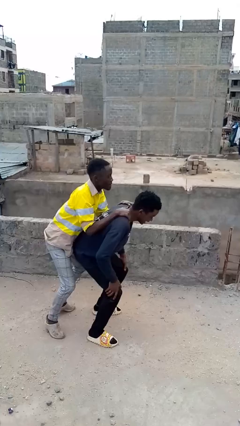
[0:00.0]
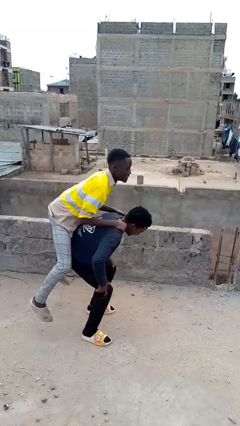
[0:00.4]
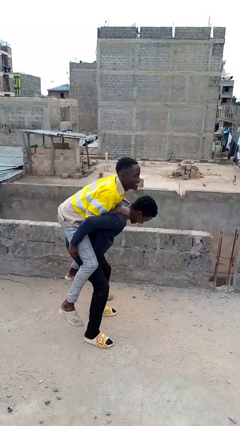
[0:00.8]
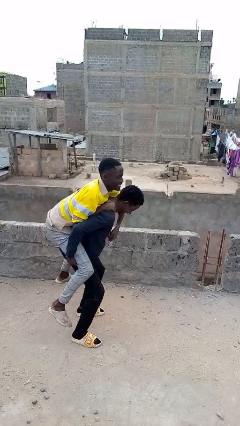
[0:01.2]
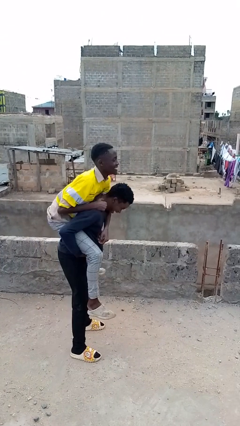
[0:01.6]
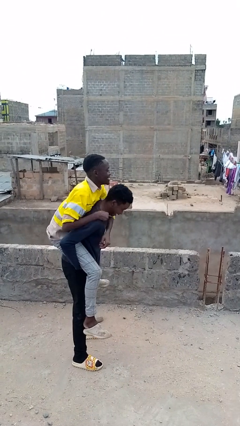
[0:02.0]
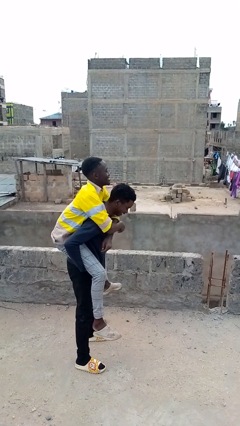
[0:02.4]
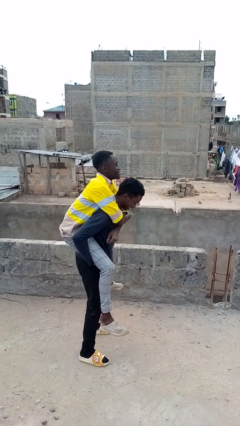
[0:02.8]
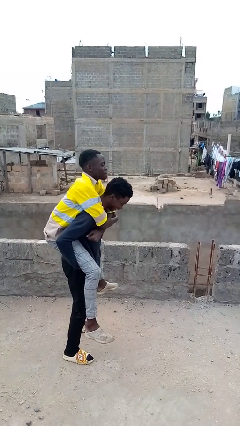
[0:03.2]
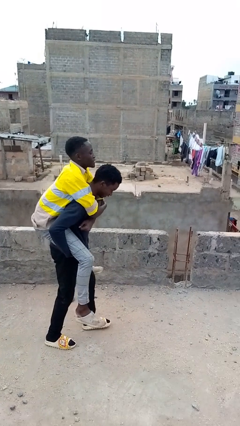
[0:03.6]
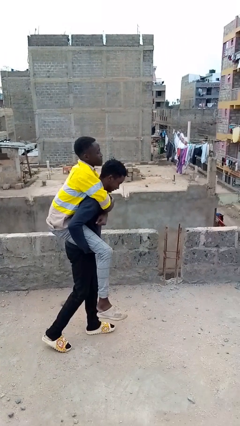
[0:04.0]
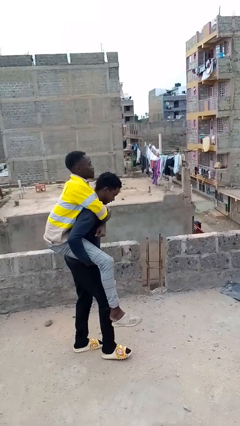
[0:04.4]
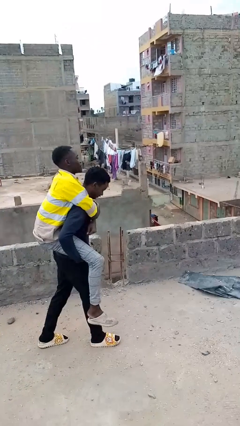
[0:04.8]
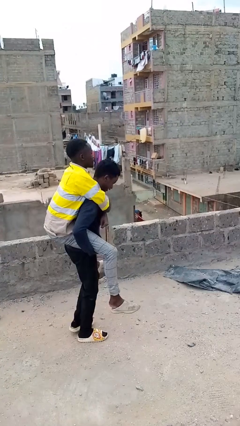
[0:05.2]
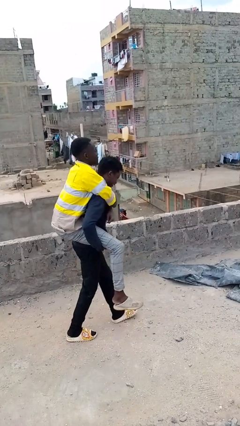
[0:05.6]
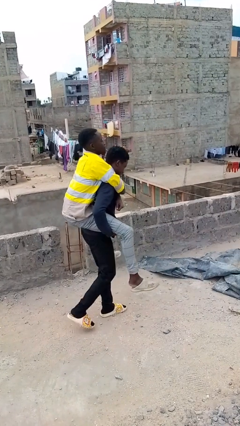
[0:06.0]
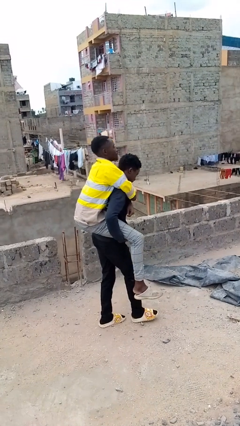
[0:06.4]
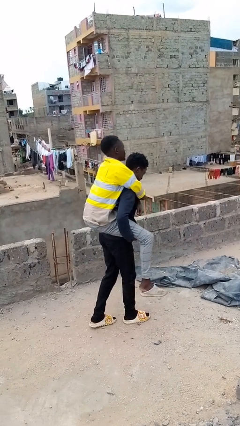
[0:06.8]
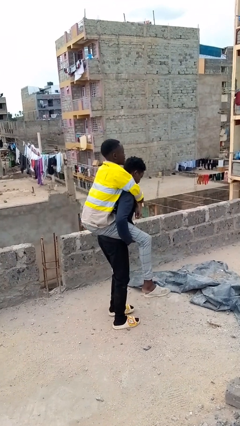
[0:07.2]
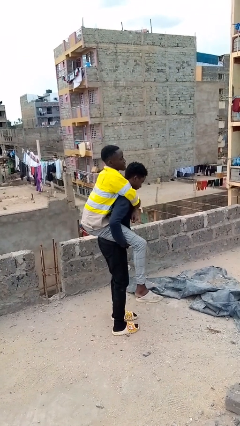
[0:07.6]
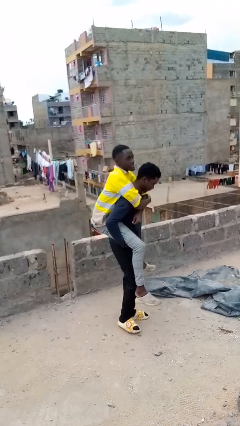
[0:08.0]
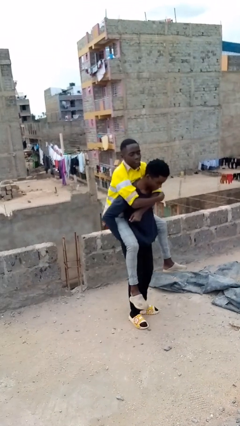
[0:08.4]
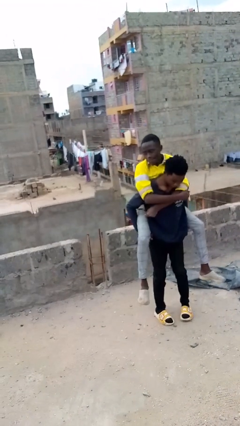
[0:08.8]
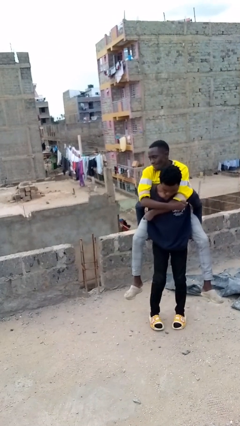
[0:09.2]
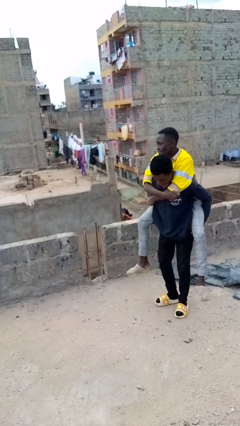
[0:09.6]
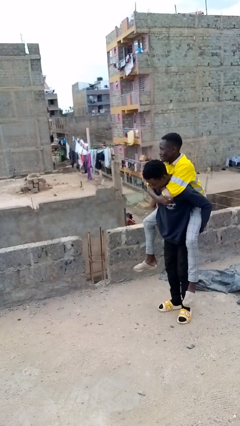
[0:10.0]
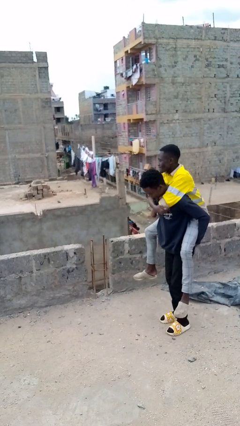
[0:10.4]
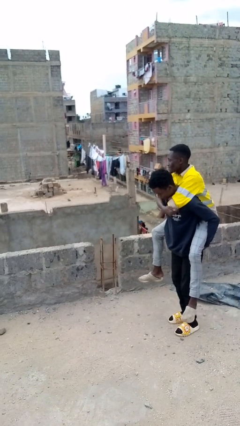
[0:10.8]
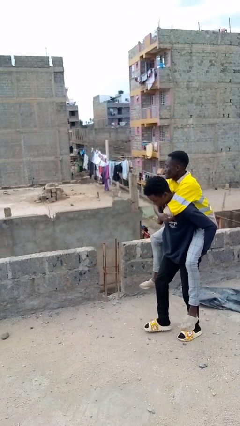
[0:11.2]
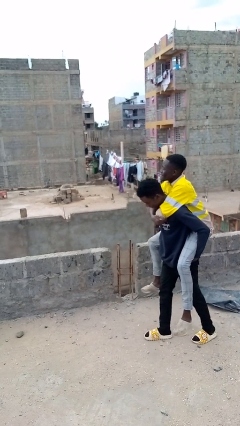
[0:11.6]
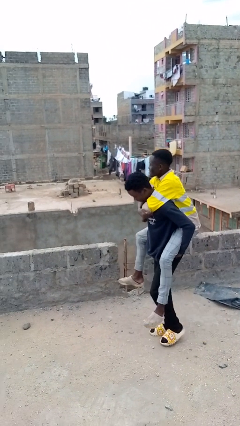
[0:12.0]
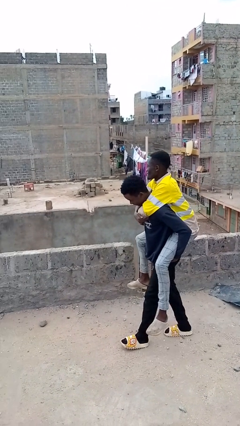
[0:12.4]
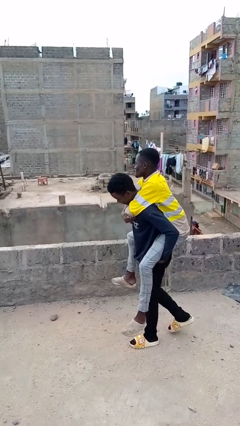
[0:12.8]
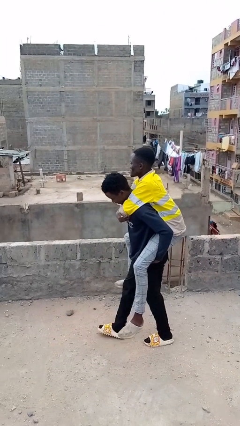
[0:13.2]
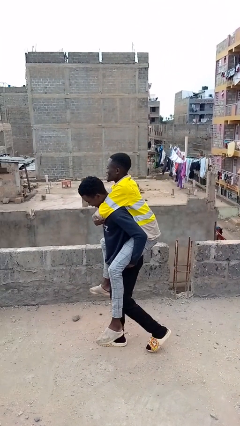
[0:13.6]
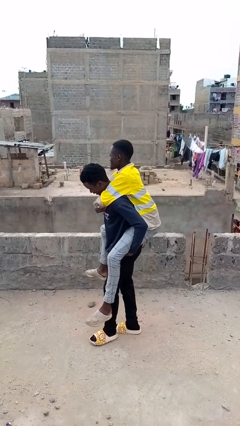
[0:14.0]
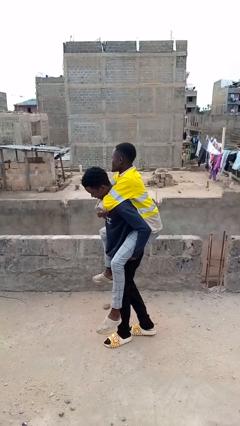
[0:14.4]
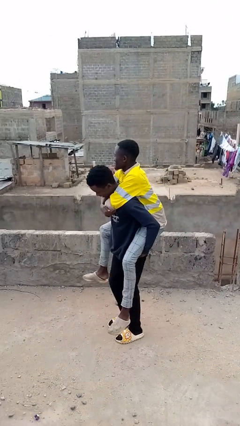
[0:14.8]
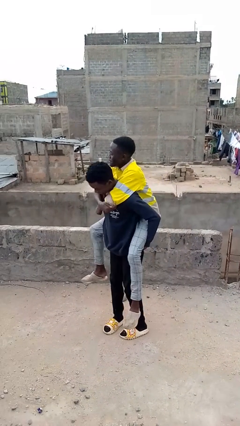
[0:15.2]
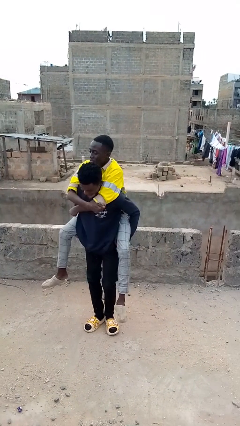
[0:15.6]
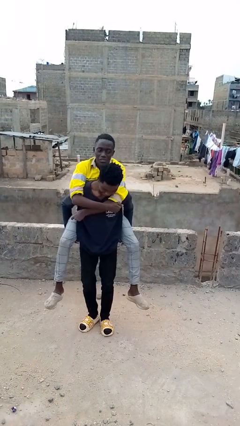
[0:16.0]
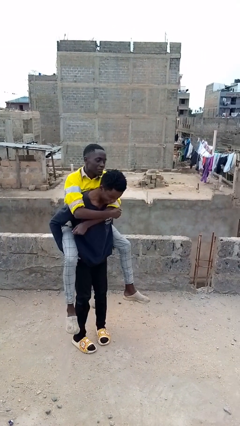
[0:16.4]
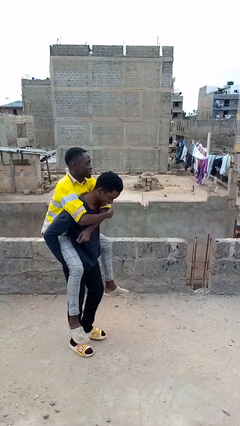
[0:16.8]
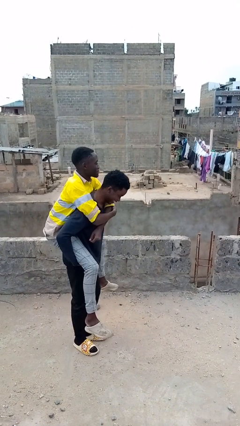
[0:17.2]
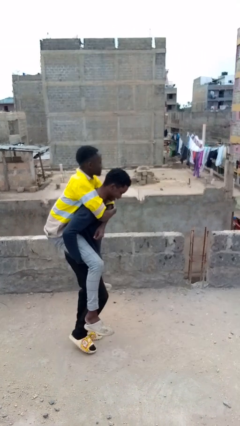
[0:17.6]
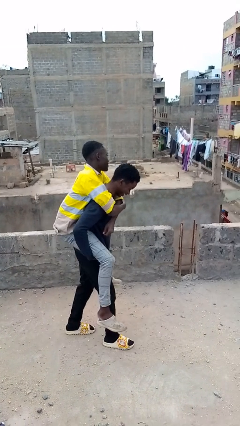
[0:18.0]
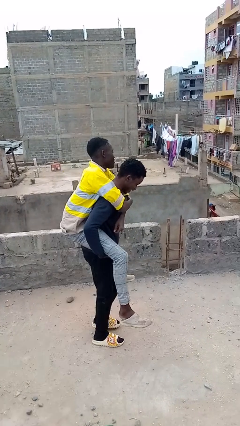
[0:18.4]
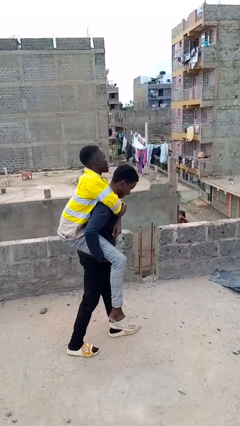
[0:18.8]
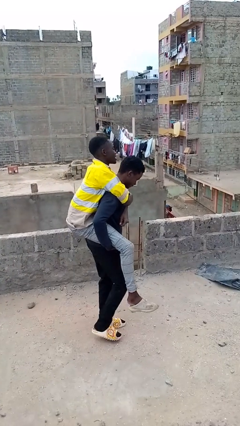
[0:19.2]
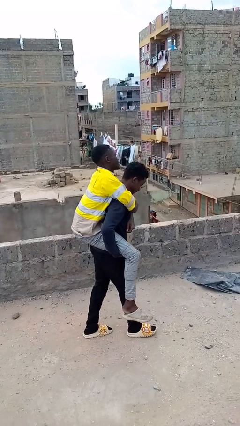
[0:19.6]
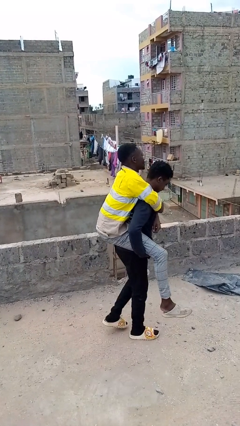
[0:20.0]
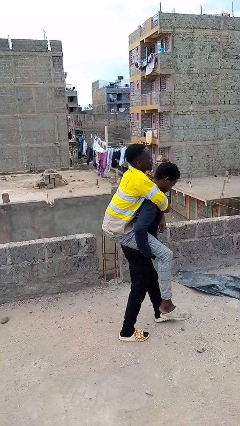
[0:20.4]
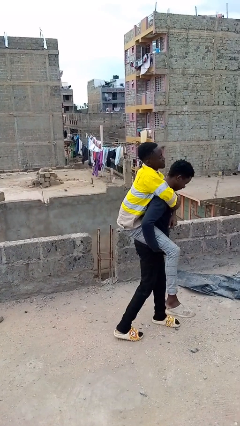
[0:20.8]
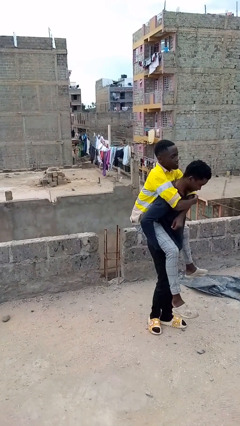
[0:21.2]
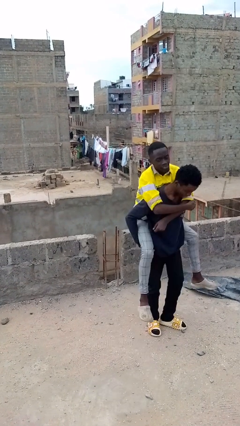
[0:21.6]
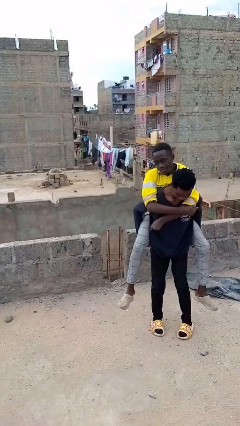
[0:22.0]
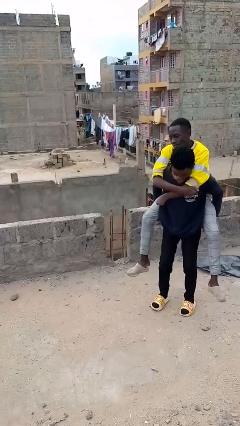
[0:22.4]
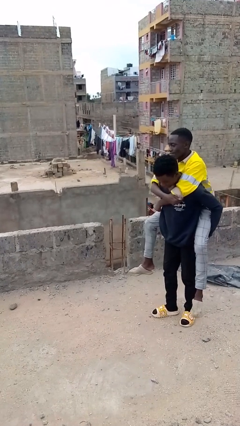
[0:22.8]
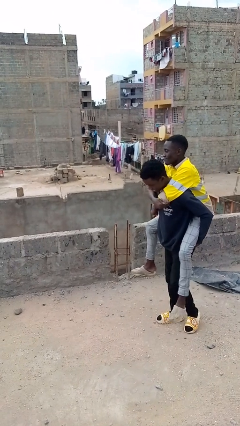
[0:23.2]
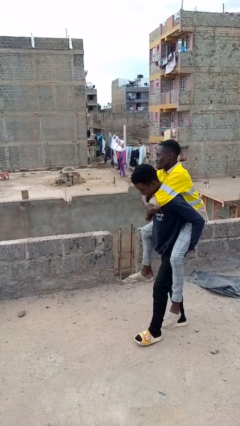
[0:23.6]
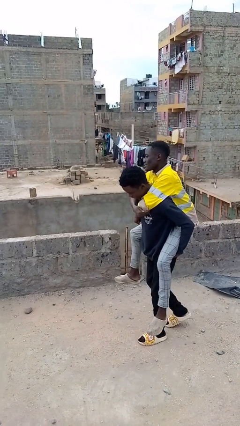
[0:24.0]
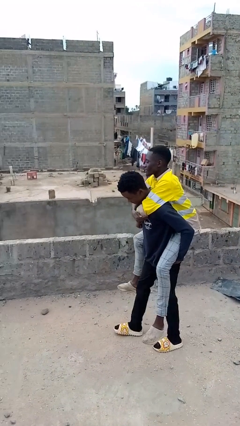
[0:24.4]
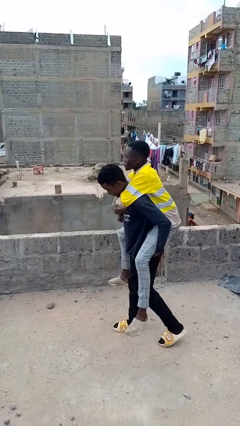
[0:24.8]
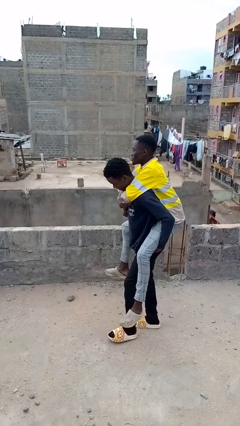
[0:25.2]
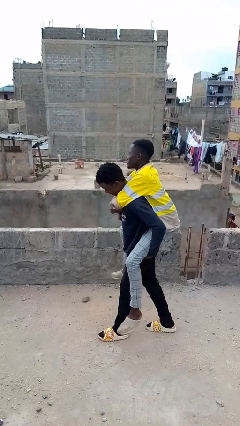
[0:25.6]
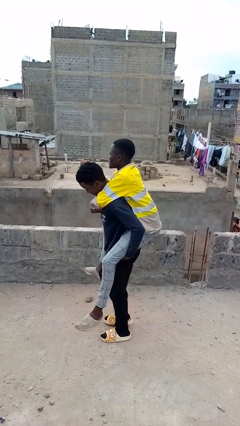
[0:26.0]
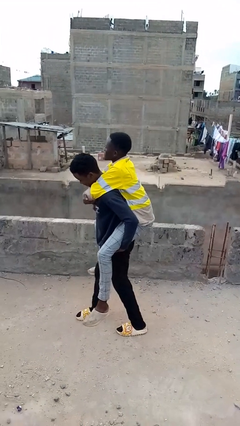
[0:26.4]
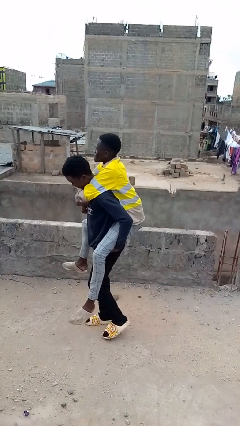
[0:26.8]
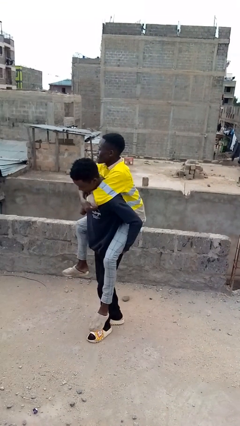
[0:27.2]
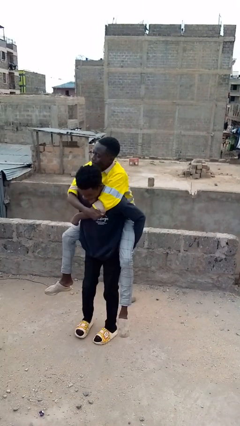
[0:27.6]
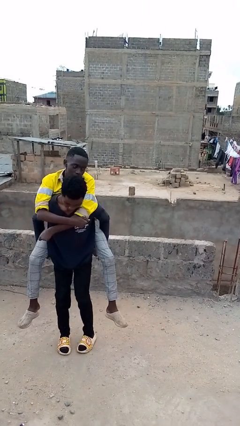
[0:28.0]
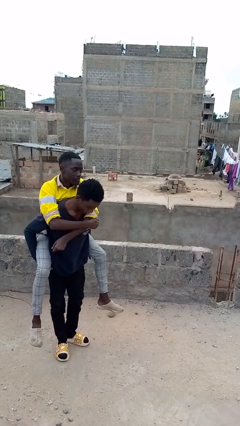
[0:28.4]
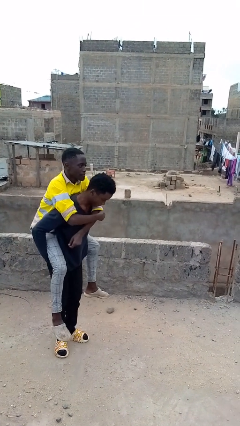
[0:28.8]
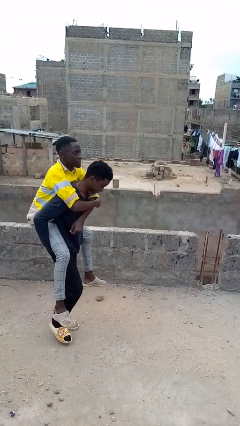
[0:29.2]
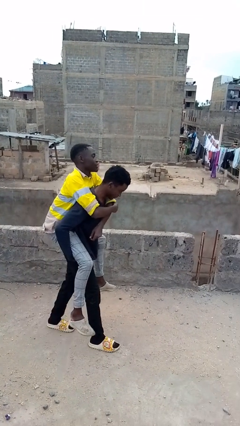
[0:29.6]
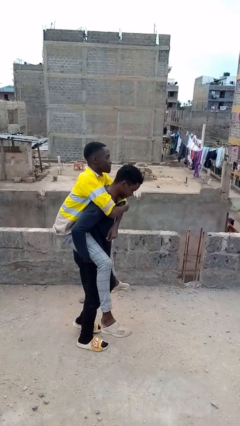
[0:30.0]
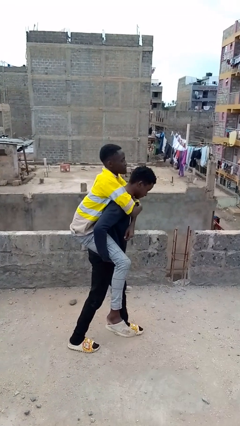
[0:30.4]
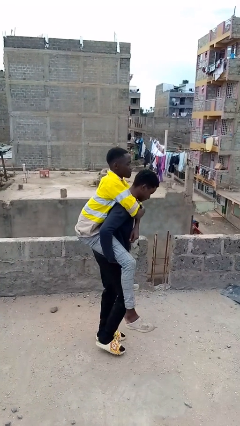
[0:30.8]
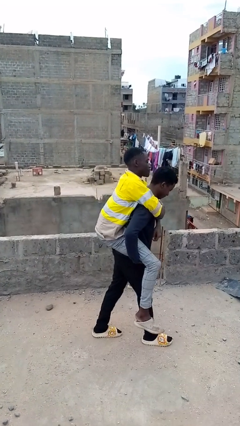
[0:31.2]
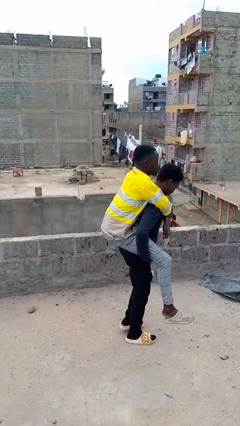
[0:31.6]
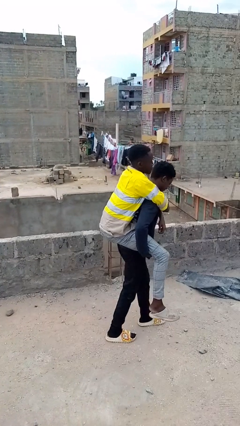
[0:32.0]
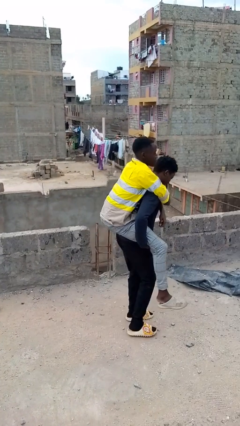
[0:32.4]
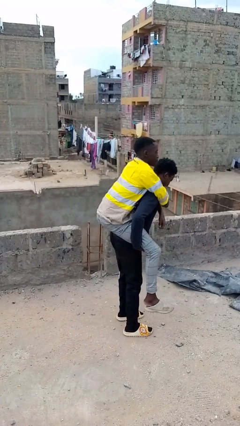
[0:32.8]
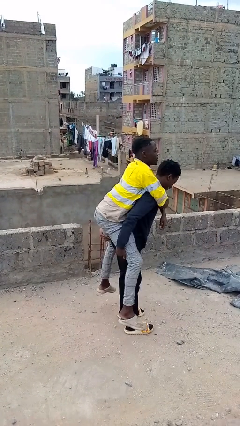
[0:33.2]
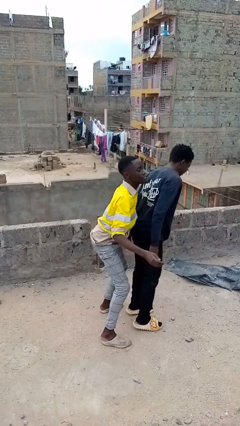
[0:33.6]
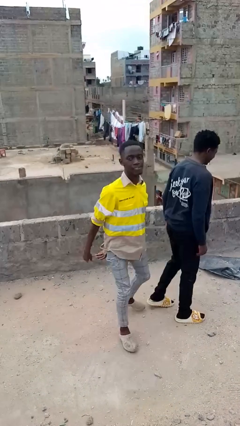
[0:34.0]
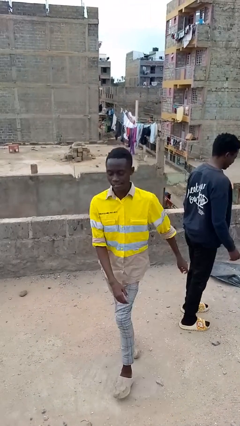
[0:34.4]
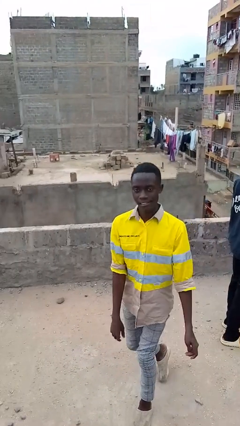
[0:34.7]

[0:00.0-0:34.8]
person carries person on back

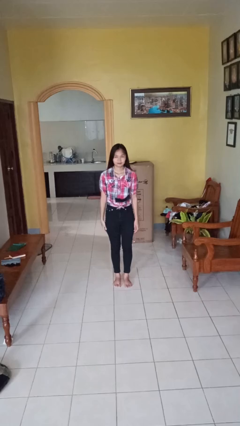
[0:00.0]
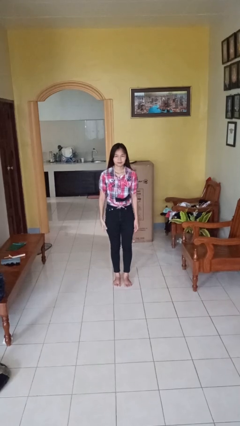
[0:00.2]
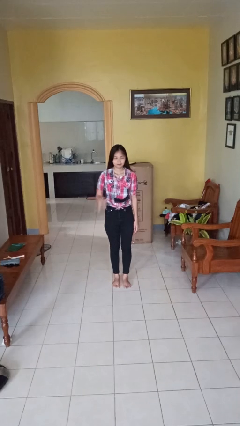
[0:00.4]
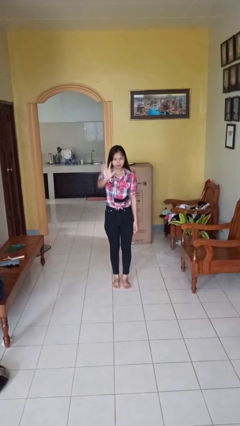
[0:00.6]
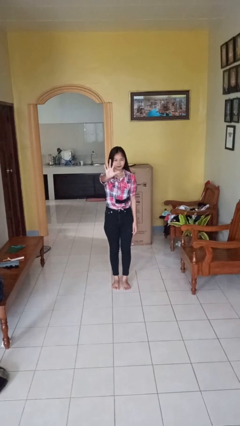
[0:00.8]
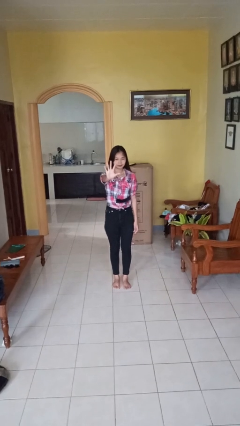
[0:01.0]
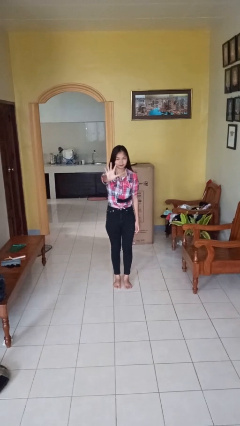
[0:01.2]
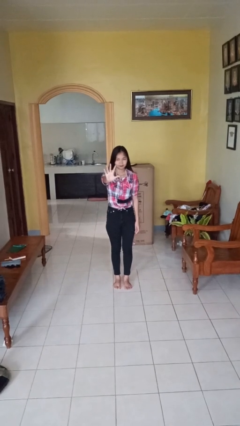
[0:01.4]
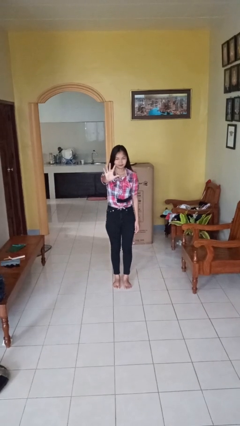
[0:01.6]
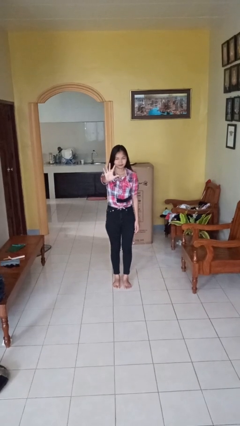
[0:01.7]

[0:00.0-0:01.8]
person gestures number five
